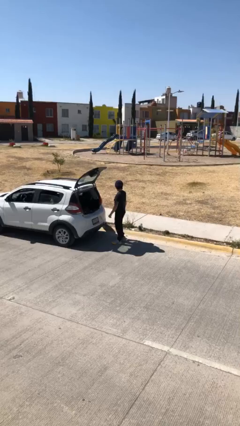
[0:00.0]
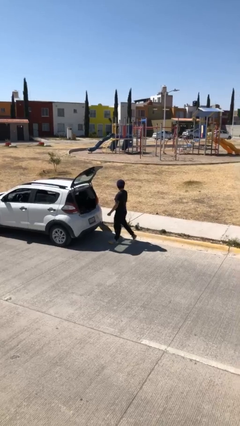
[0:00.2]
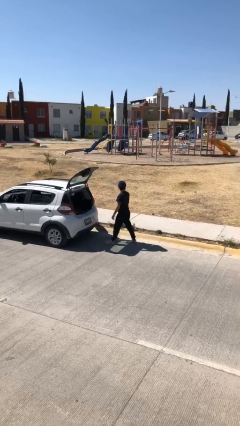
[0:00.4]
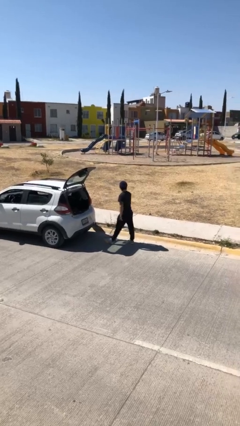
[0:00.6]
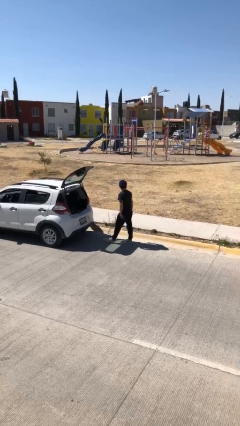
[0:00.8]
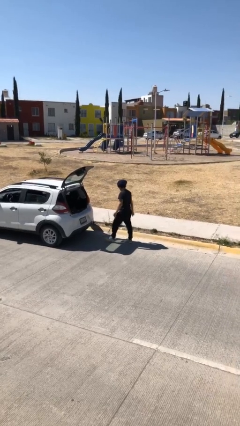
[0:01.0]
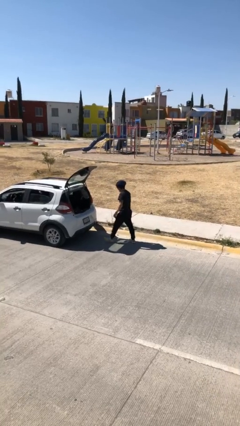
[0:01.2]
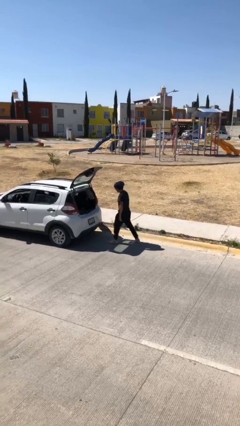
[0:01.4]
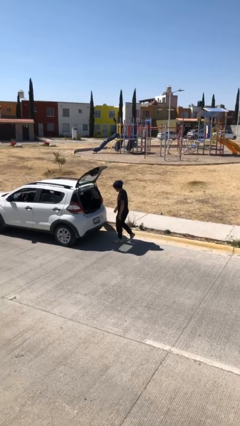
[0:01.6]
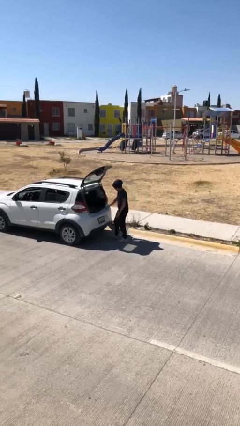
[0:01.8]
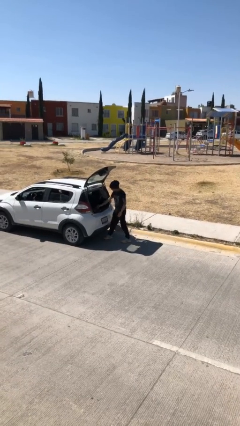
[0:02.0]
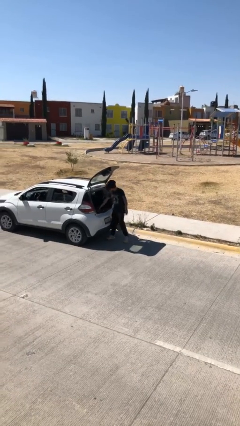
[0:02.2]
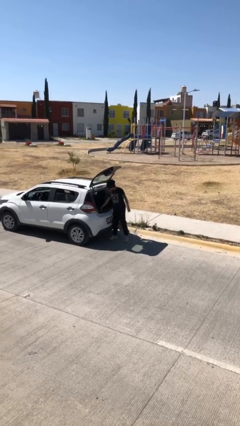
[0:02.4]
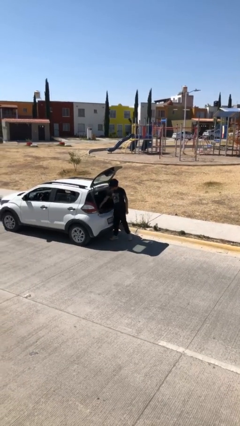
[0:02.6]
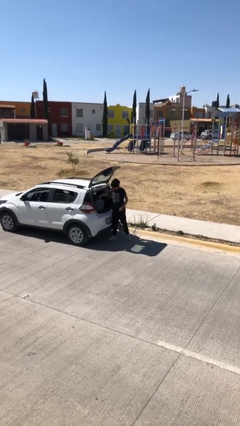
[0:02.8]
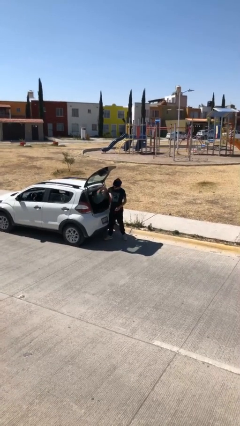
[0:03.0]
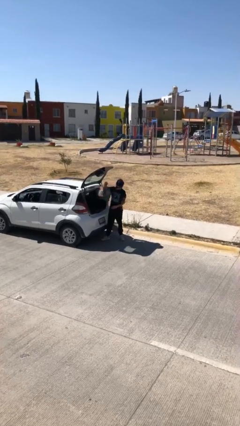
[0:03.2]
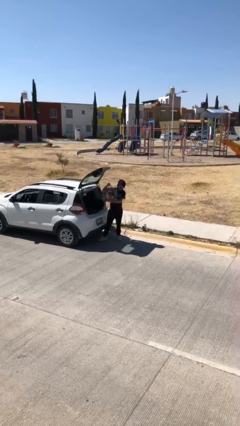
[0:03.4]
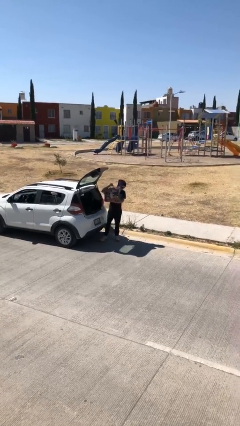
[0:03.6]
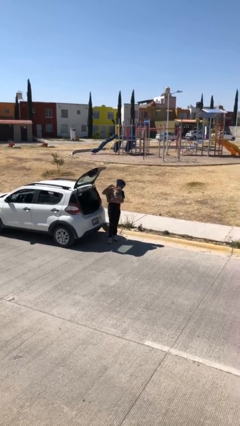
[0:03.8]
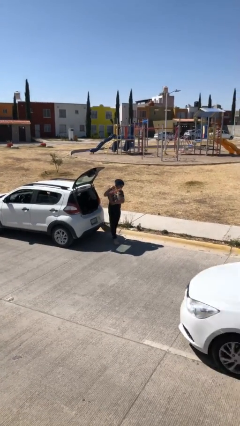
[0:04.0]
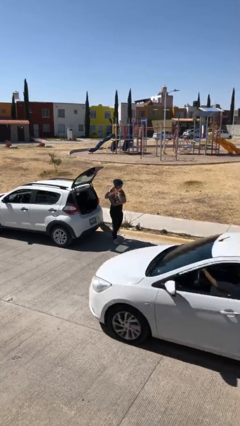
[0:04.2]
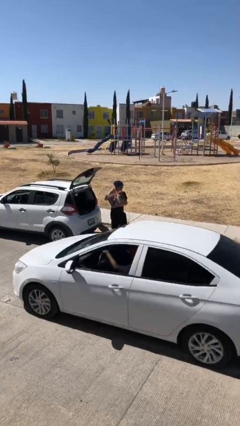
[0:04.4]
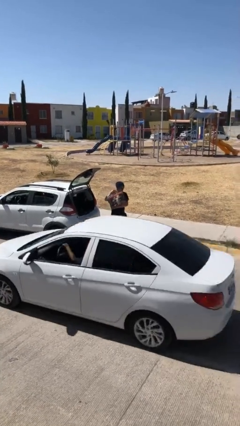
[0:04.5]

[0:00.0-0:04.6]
person unloads car

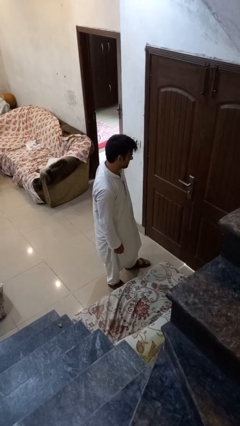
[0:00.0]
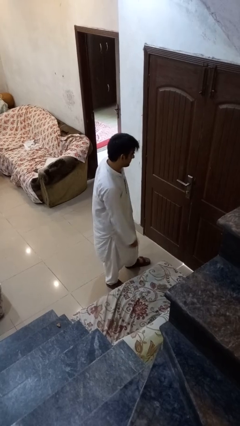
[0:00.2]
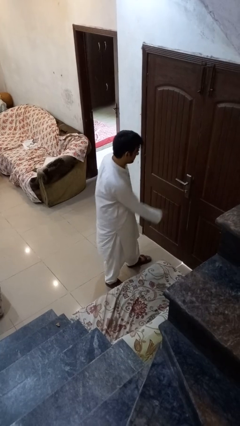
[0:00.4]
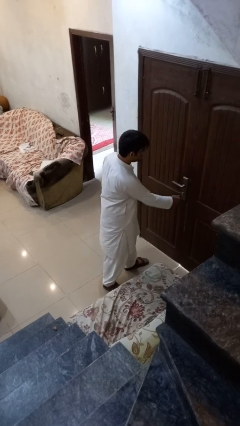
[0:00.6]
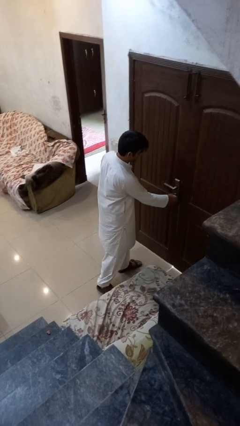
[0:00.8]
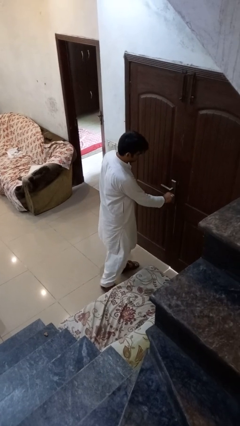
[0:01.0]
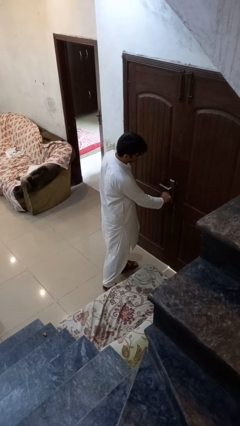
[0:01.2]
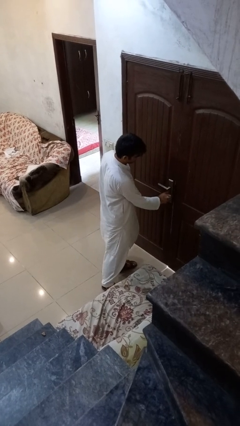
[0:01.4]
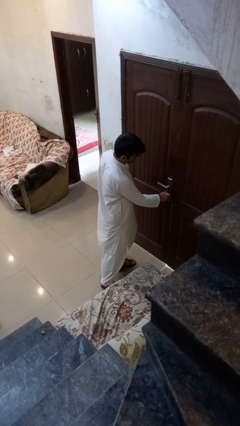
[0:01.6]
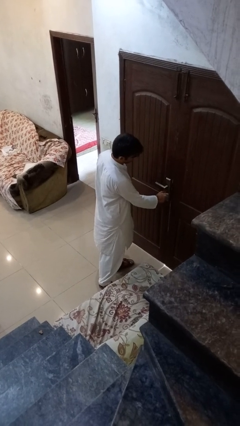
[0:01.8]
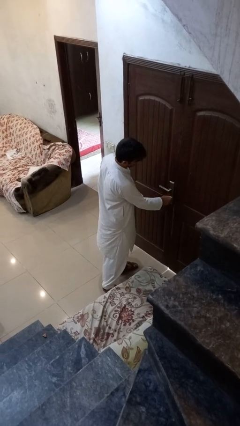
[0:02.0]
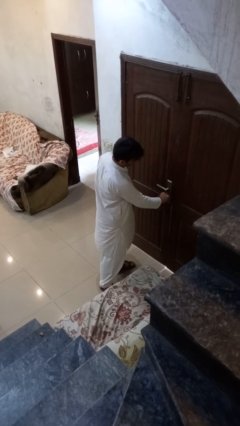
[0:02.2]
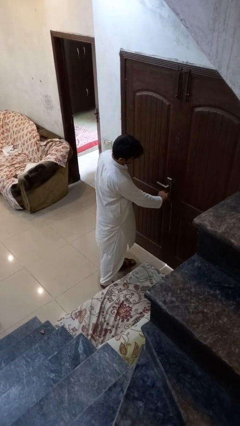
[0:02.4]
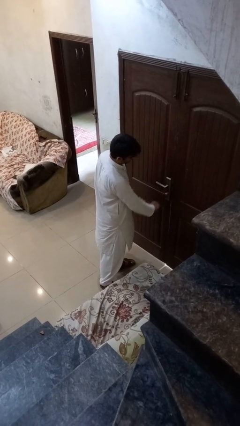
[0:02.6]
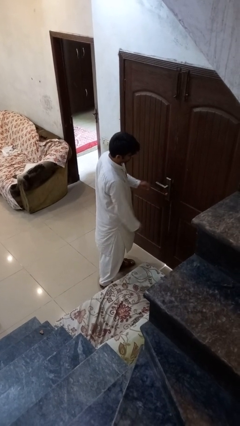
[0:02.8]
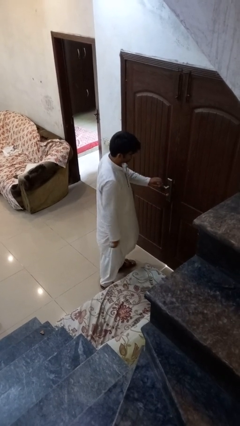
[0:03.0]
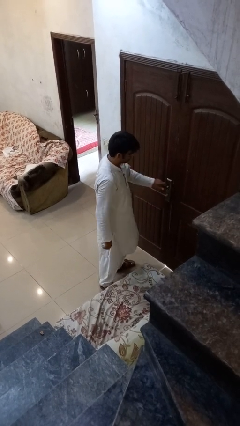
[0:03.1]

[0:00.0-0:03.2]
person unlocks door with keys

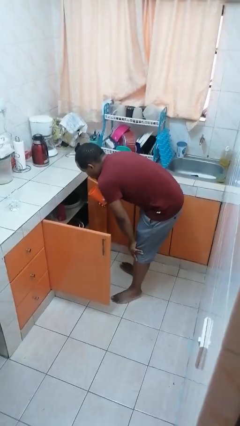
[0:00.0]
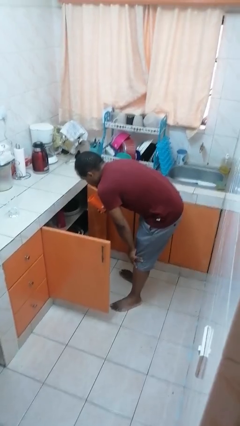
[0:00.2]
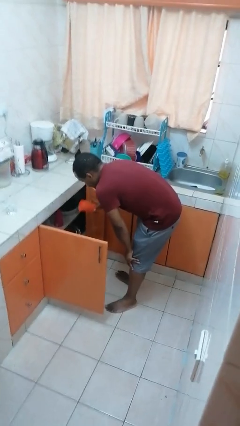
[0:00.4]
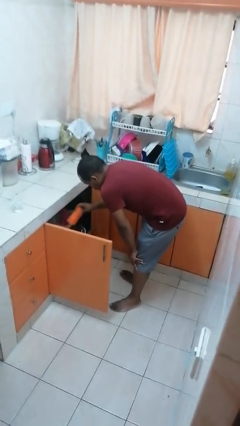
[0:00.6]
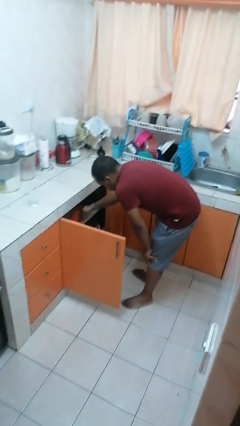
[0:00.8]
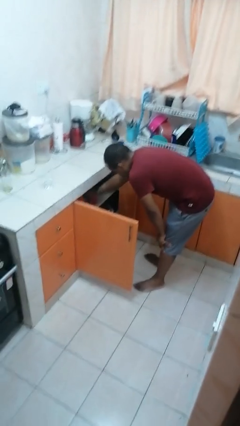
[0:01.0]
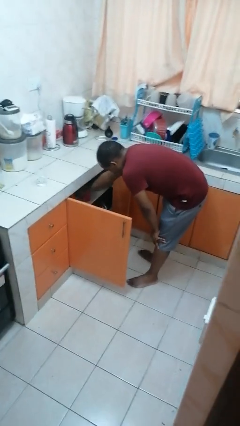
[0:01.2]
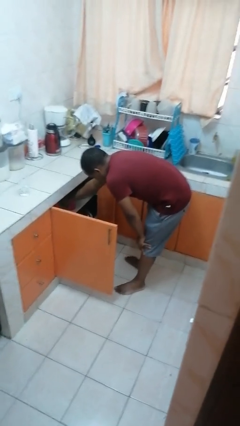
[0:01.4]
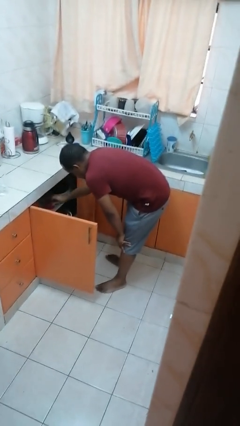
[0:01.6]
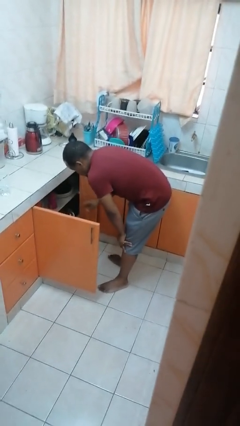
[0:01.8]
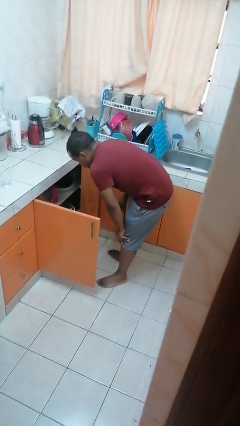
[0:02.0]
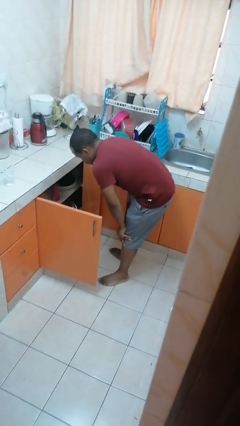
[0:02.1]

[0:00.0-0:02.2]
person puts object in cabinet

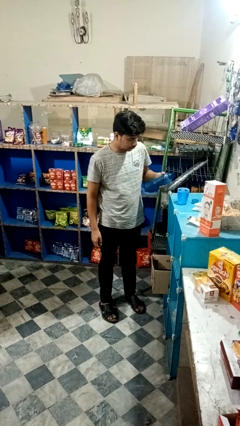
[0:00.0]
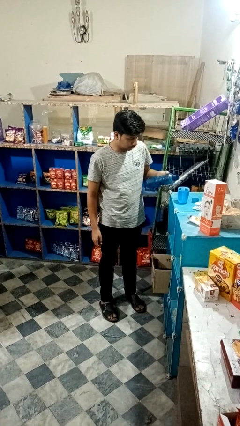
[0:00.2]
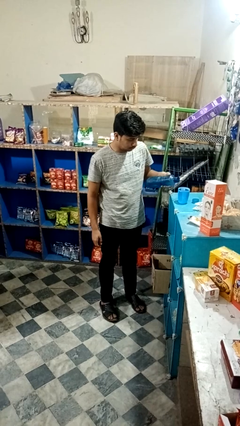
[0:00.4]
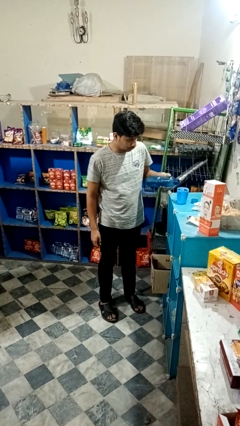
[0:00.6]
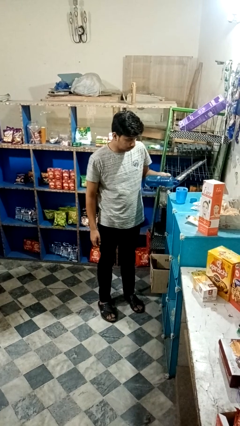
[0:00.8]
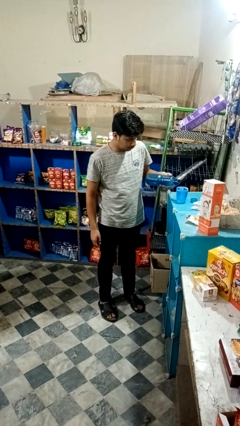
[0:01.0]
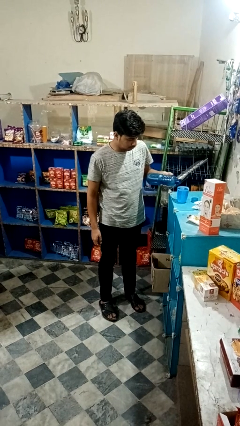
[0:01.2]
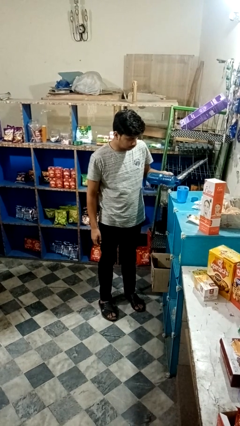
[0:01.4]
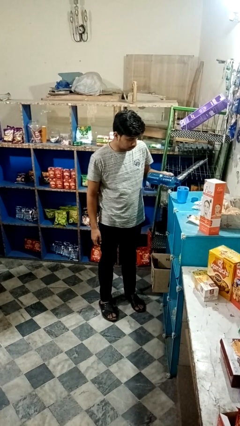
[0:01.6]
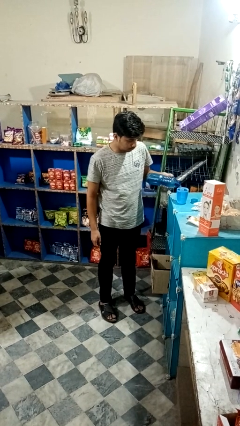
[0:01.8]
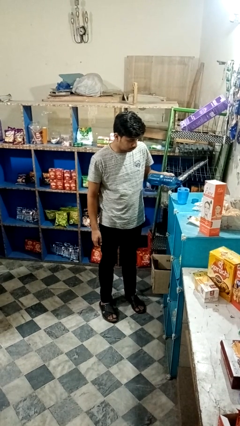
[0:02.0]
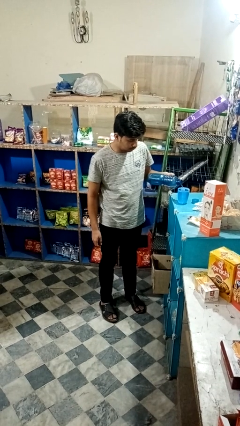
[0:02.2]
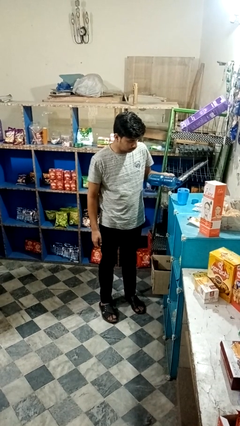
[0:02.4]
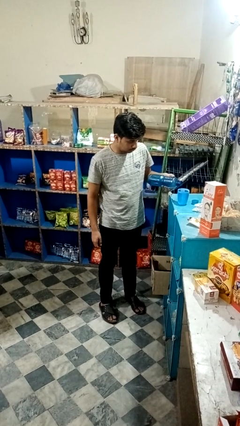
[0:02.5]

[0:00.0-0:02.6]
person pours liquid into cup

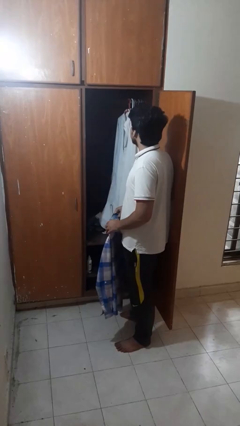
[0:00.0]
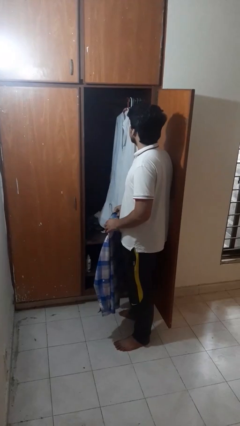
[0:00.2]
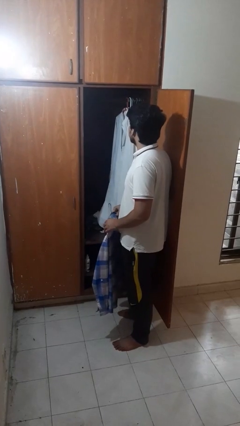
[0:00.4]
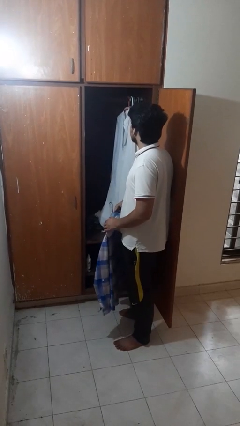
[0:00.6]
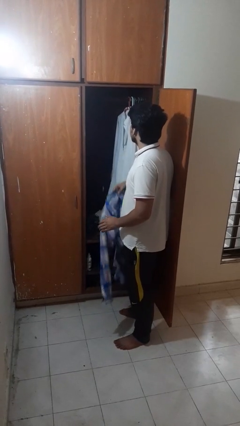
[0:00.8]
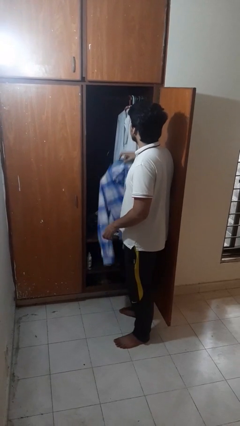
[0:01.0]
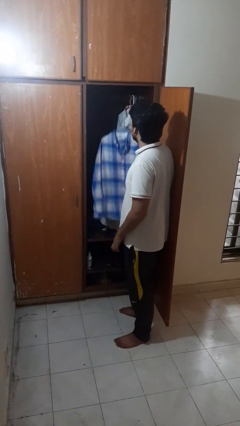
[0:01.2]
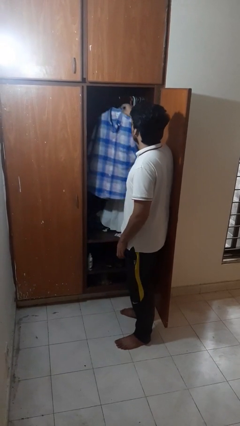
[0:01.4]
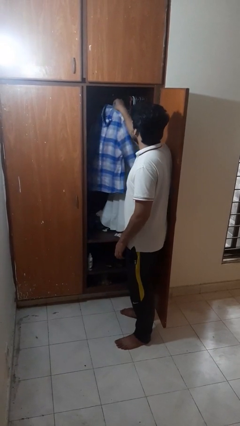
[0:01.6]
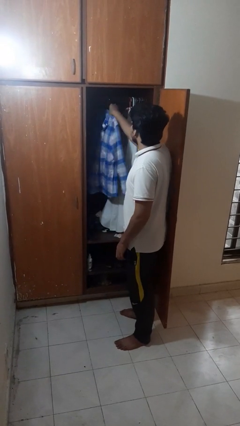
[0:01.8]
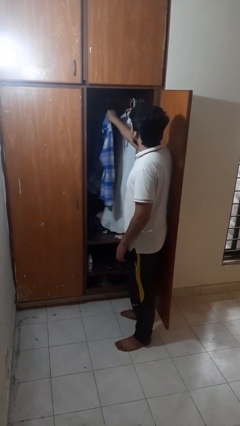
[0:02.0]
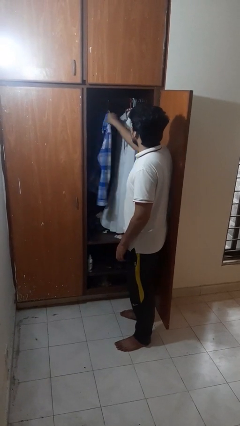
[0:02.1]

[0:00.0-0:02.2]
person puts clothes into closet

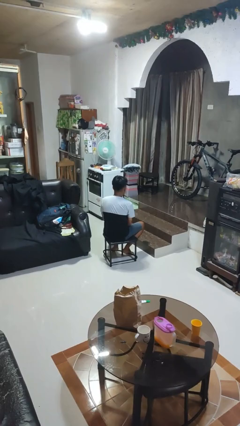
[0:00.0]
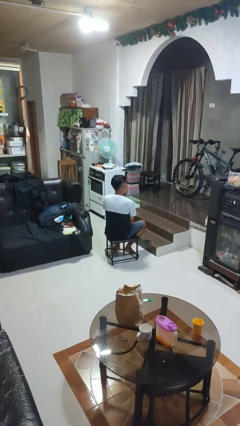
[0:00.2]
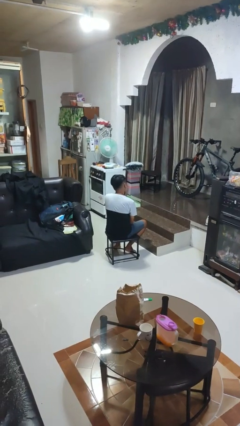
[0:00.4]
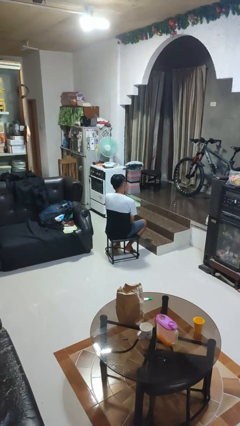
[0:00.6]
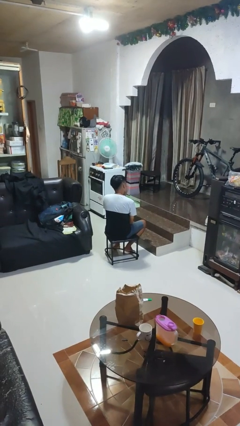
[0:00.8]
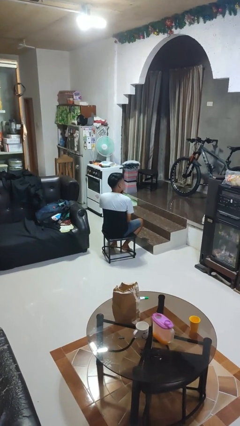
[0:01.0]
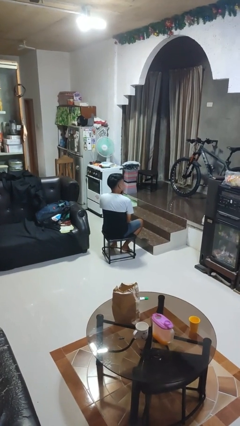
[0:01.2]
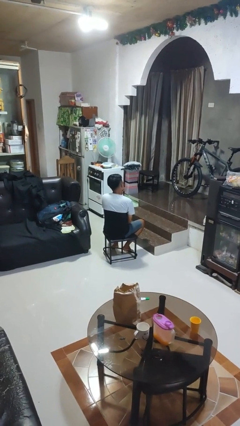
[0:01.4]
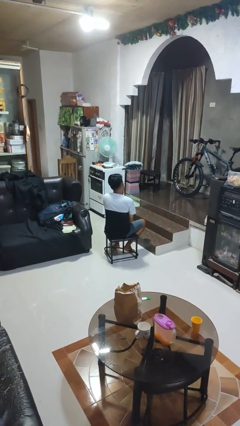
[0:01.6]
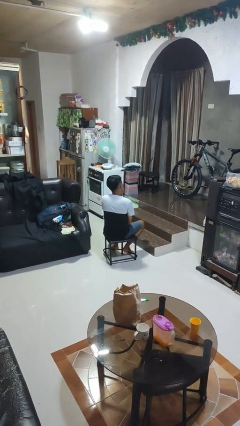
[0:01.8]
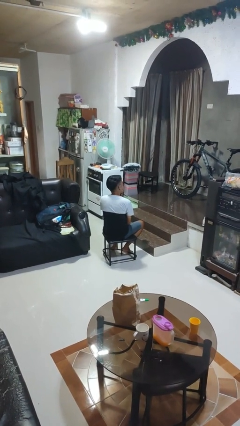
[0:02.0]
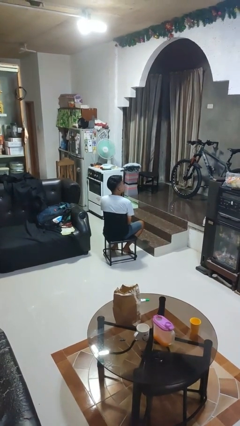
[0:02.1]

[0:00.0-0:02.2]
person strokes chin

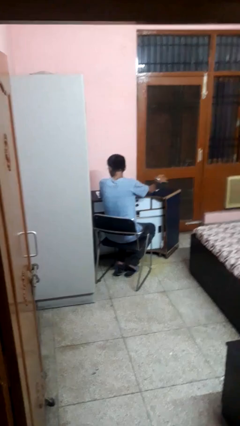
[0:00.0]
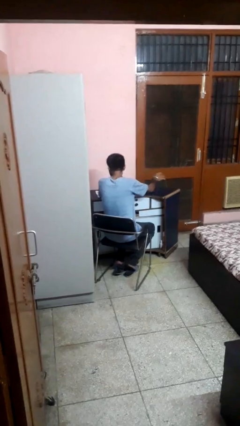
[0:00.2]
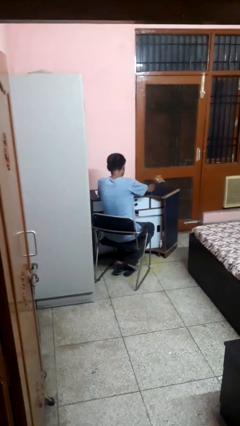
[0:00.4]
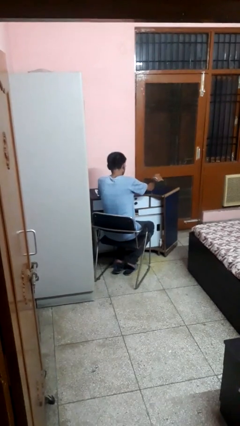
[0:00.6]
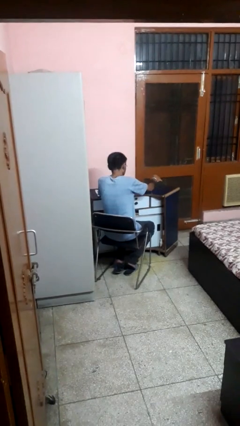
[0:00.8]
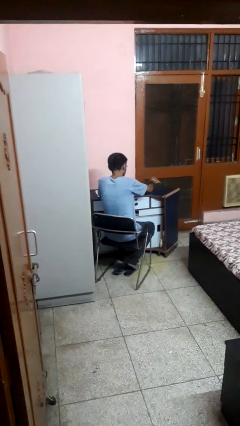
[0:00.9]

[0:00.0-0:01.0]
person knocks over glass
